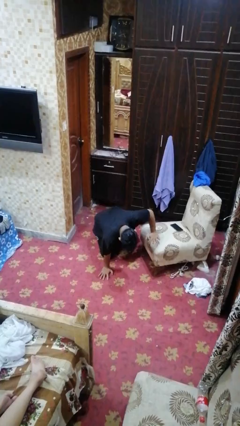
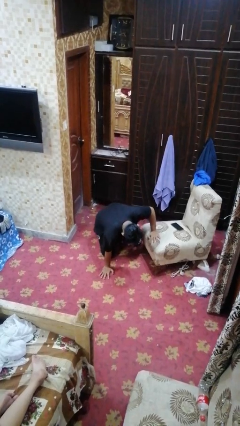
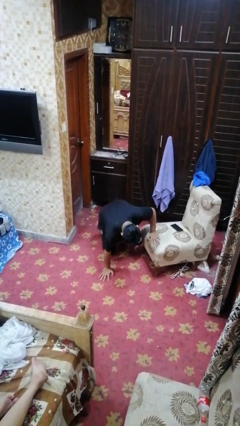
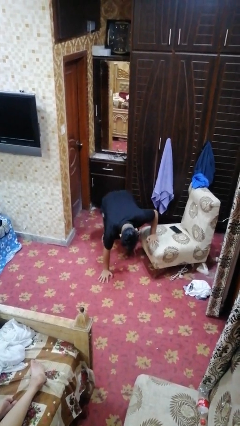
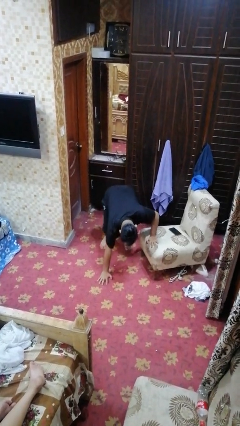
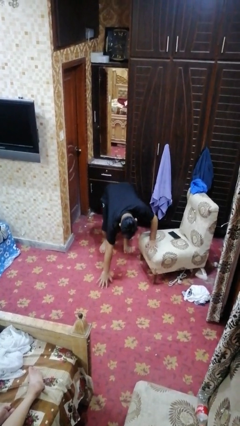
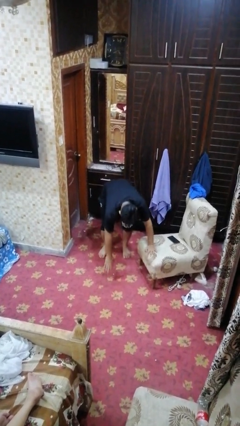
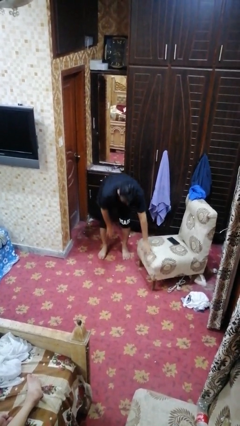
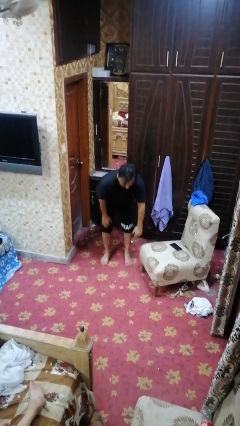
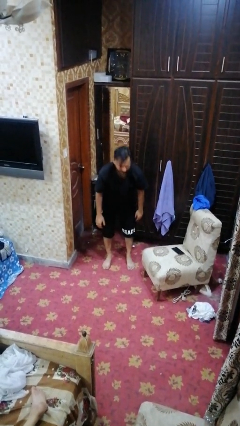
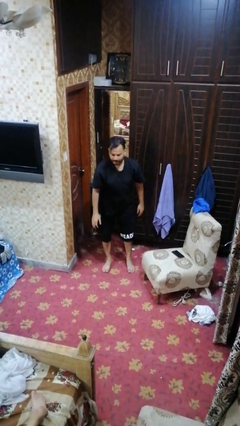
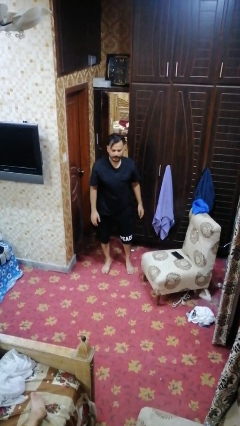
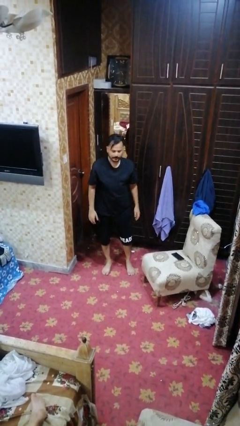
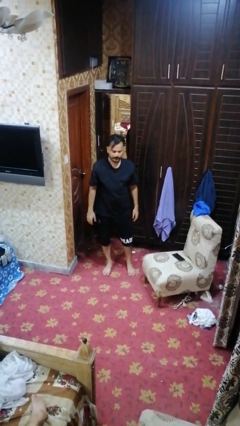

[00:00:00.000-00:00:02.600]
person stands up from floor

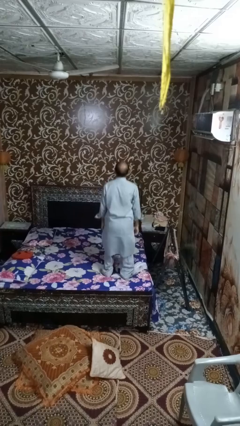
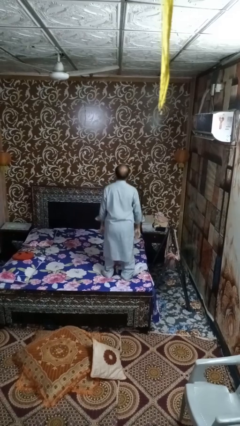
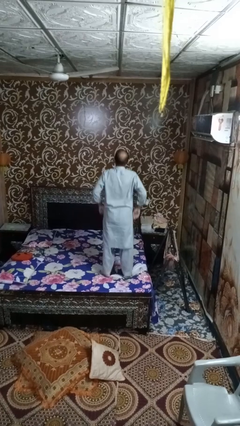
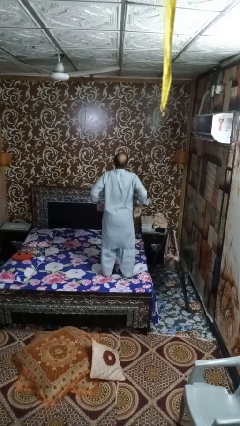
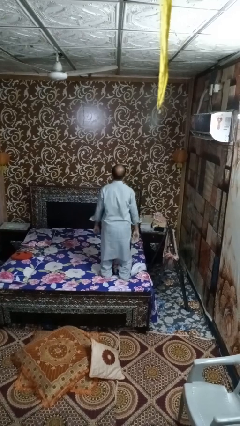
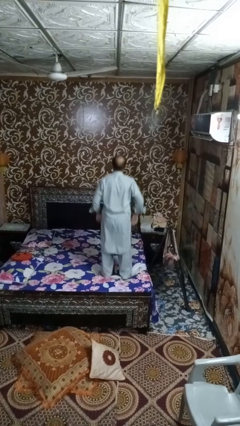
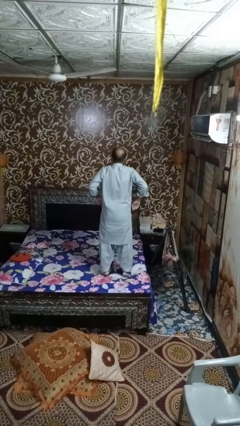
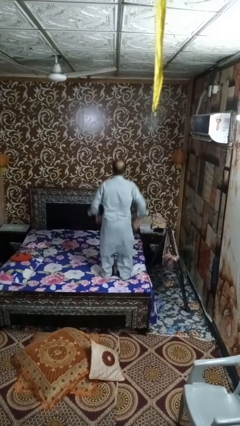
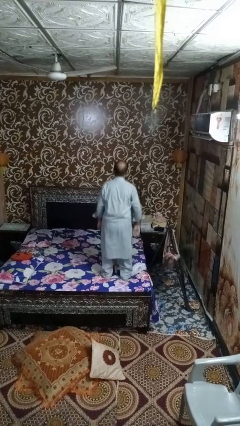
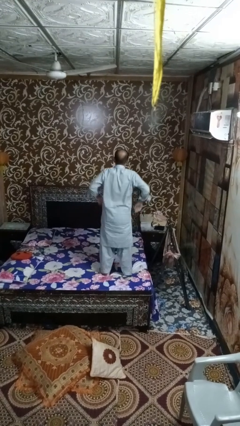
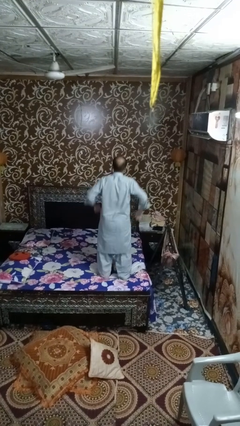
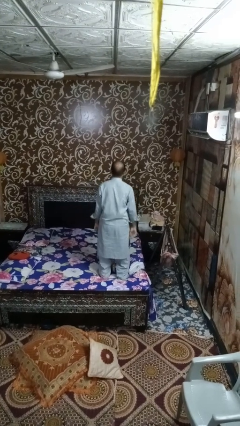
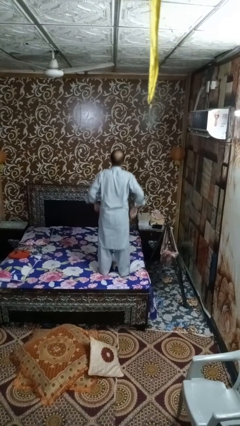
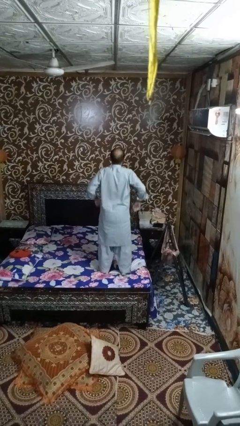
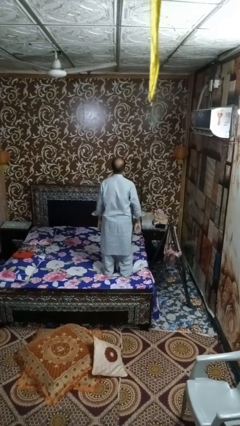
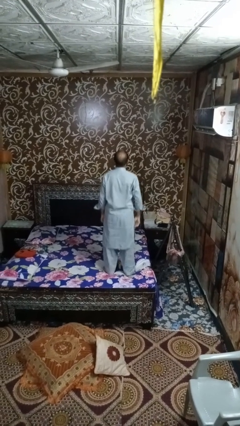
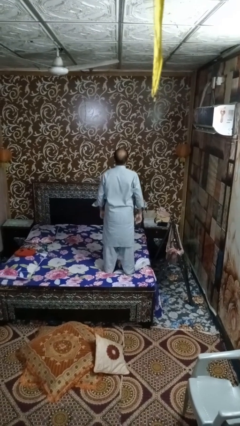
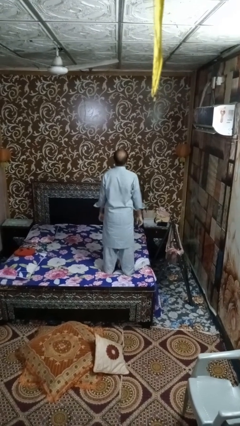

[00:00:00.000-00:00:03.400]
person jumps on bed

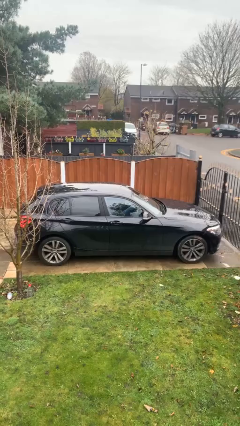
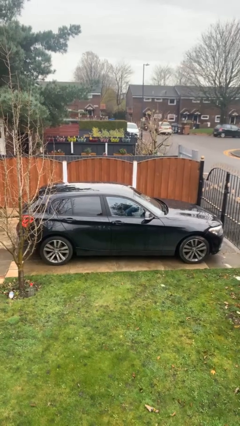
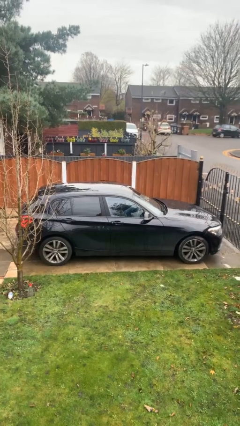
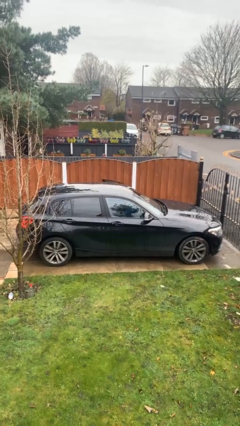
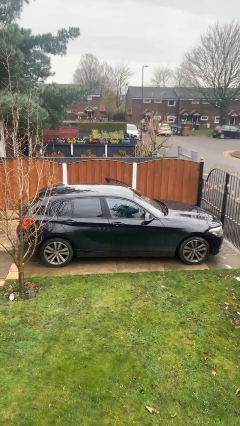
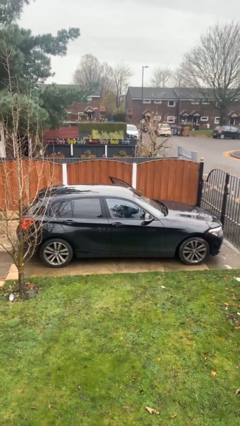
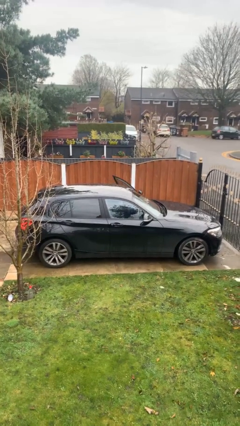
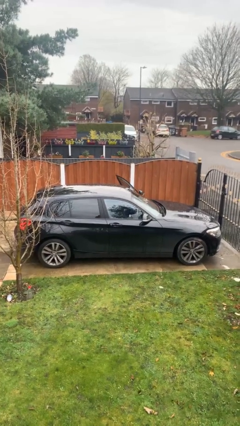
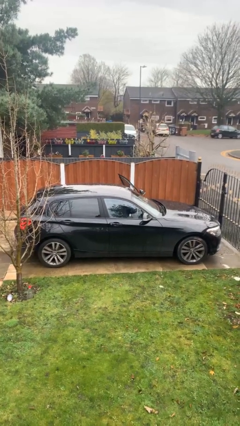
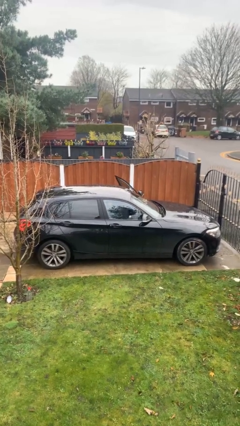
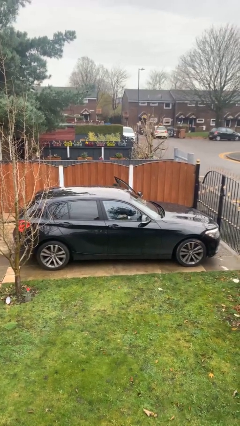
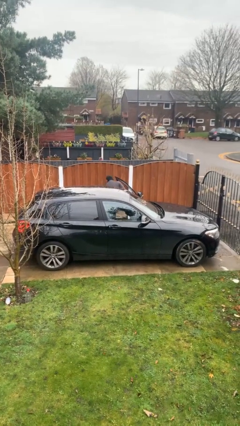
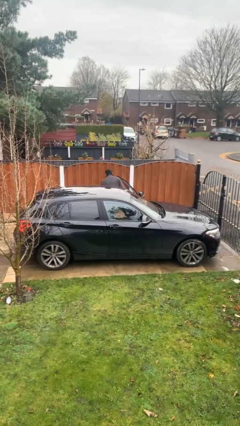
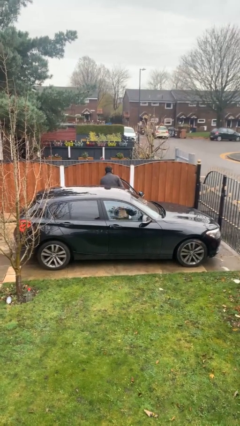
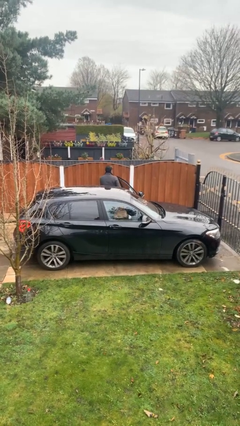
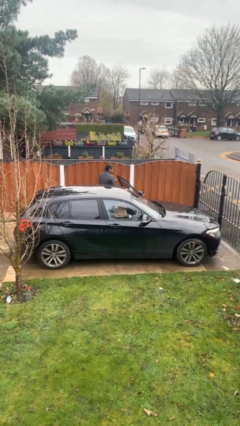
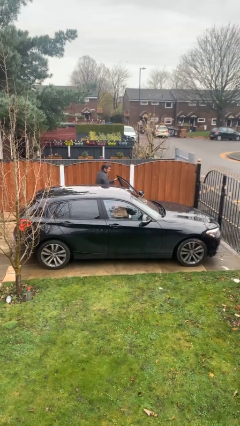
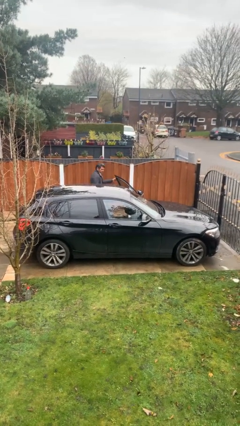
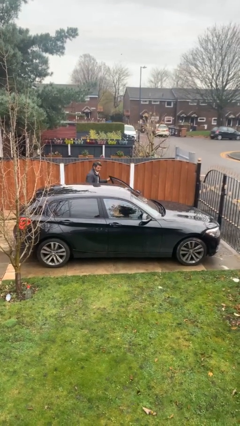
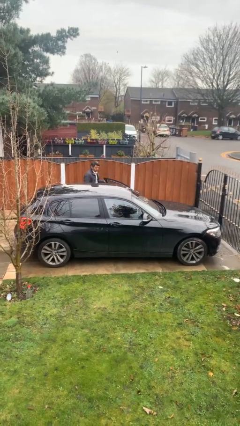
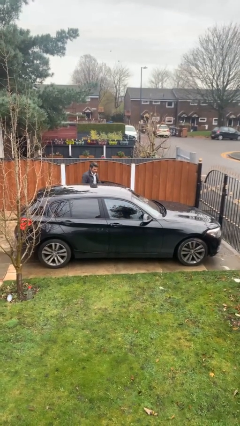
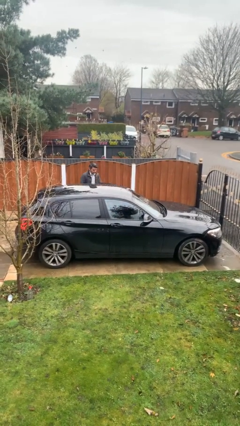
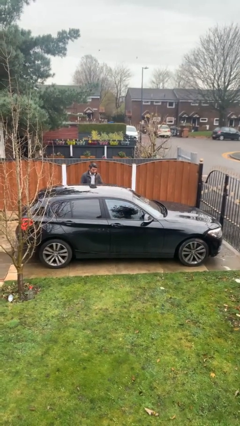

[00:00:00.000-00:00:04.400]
car drops off person

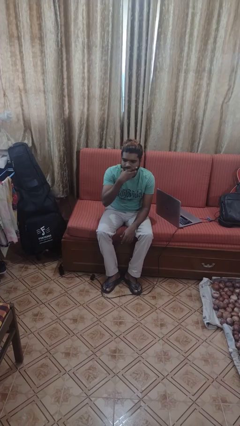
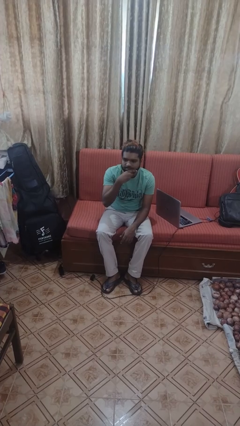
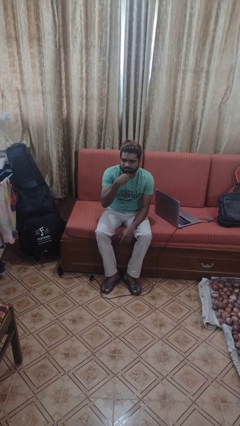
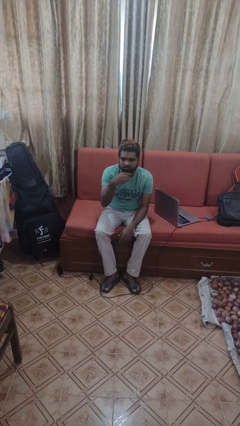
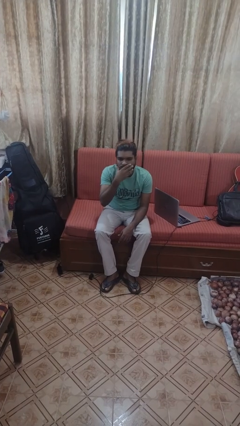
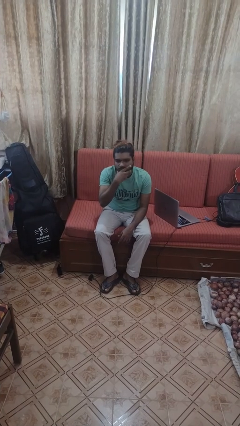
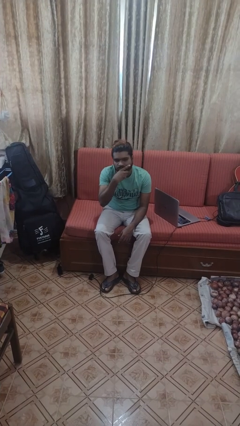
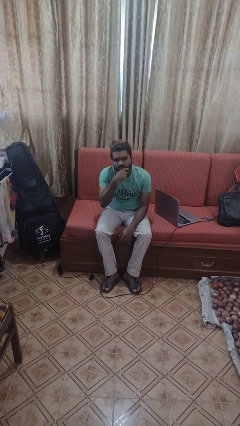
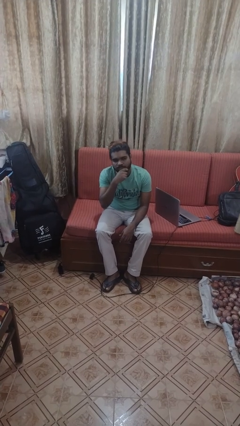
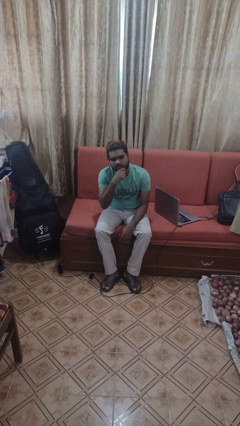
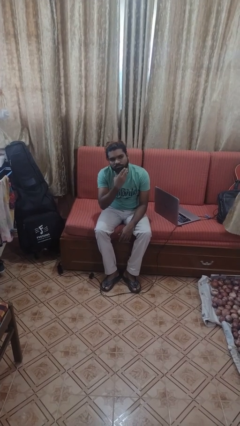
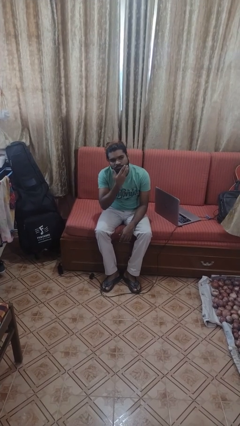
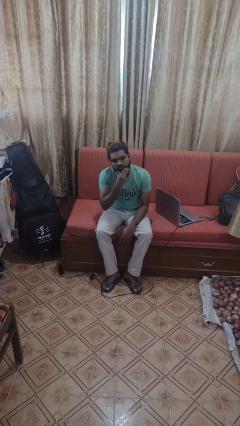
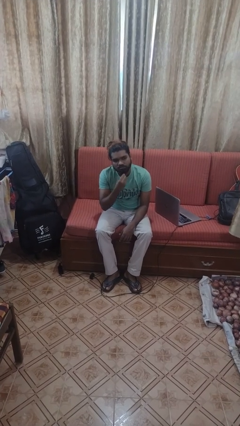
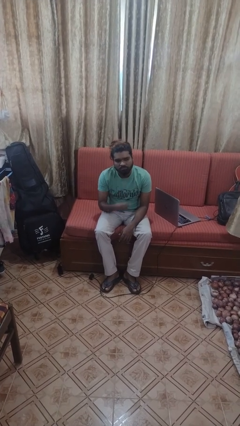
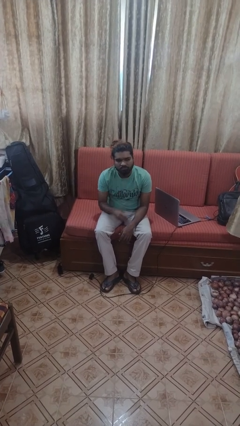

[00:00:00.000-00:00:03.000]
person strokes chin

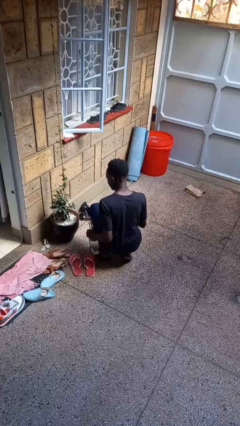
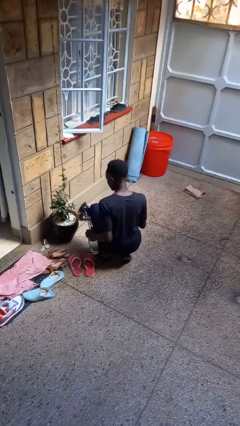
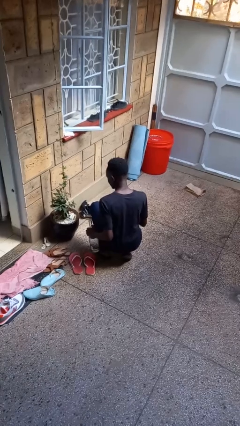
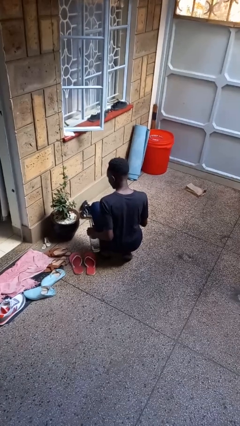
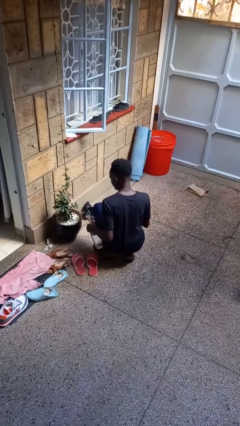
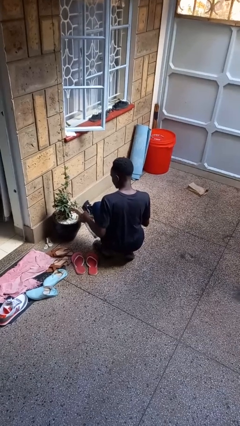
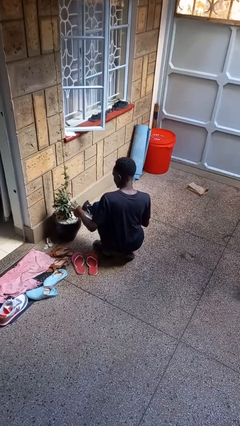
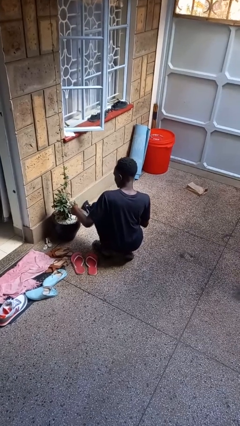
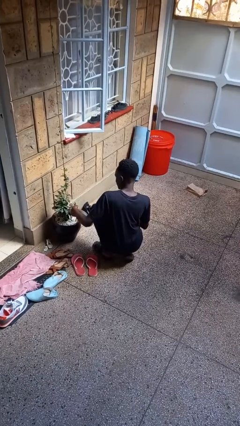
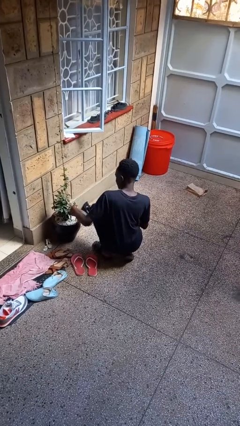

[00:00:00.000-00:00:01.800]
person waters houseplant

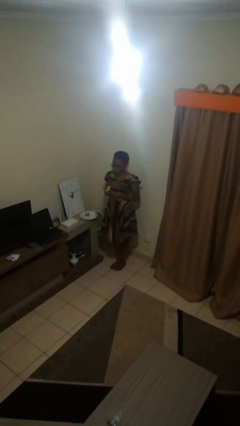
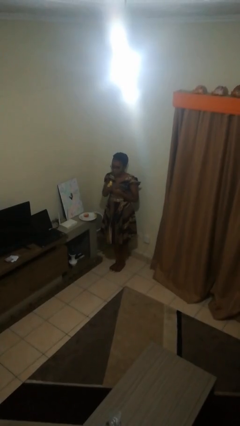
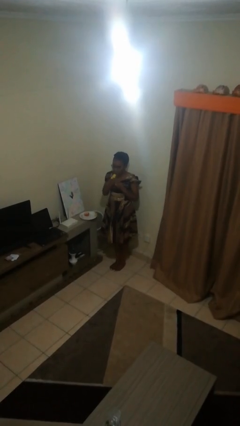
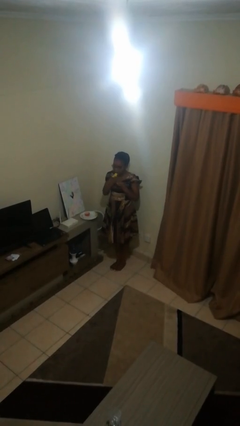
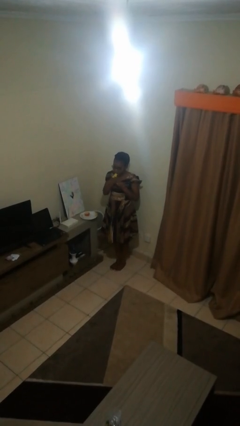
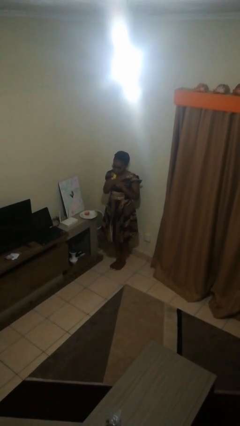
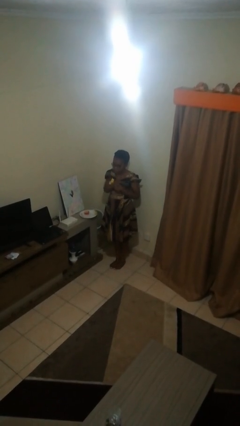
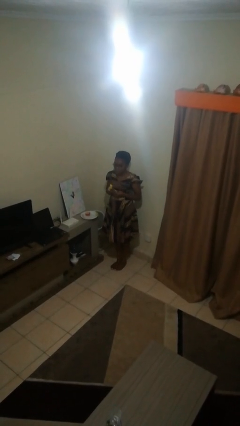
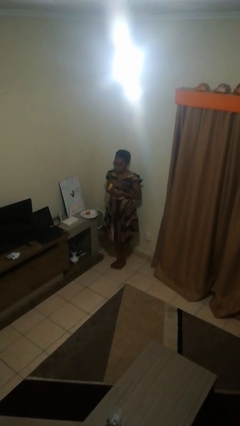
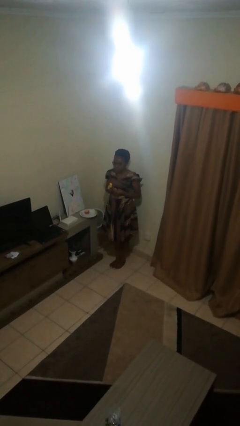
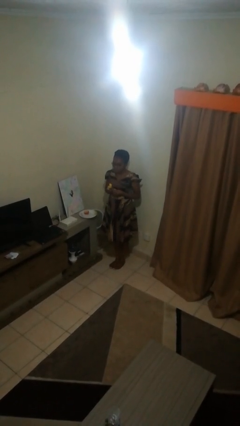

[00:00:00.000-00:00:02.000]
person eats banana

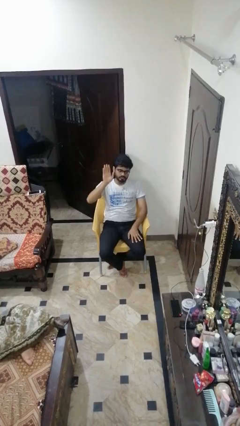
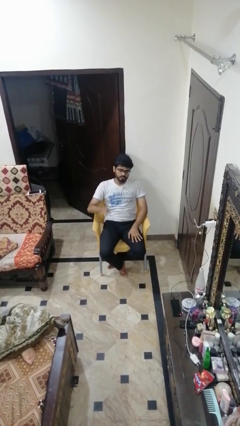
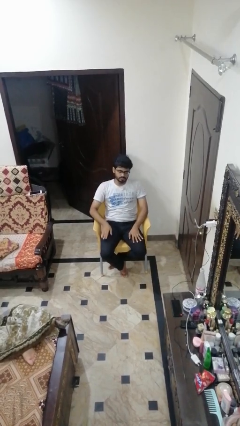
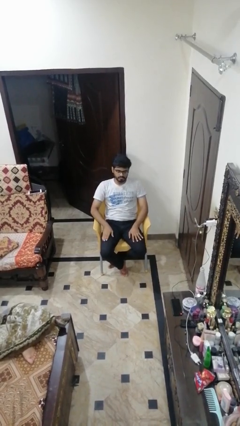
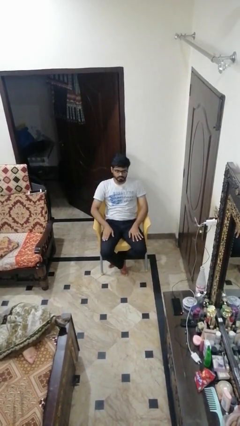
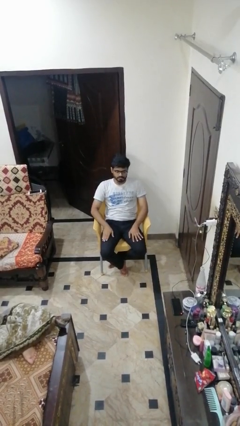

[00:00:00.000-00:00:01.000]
person gestures lower hand
